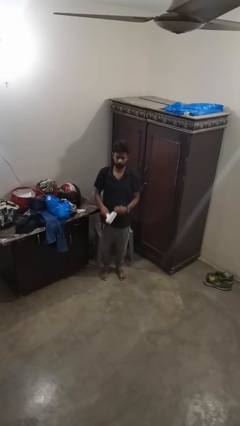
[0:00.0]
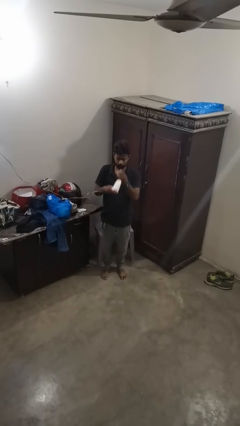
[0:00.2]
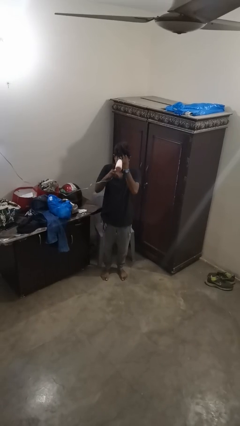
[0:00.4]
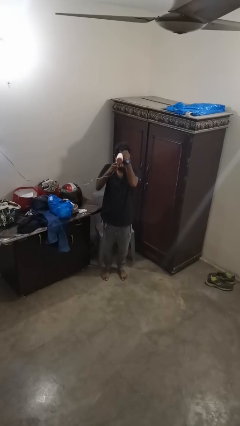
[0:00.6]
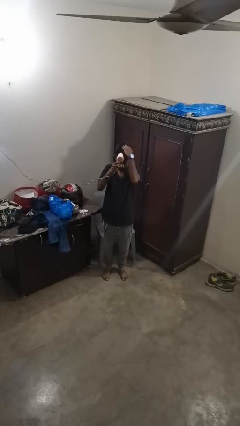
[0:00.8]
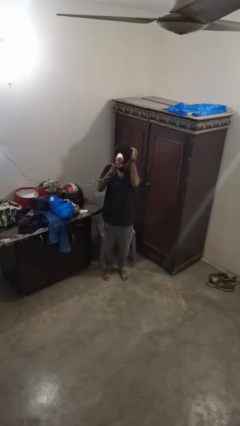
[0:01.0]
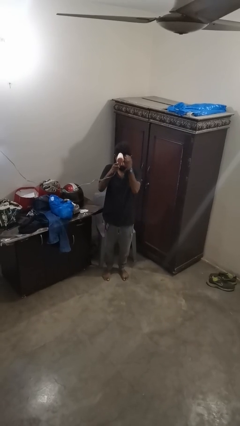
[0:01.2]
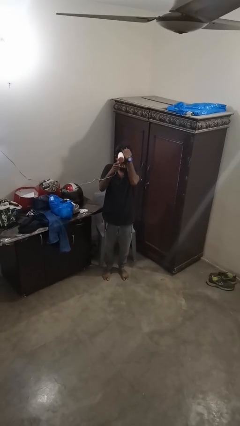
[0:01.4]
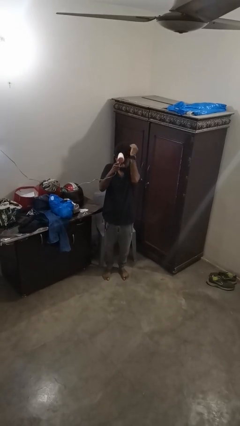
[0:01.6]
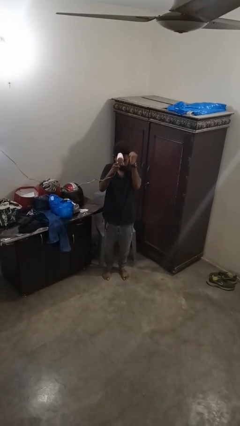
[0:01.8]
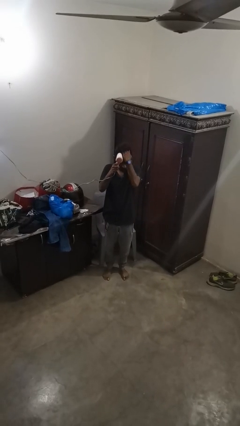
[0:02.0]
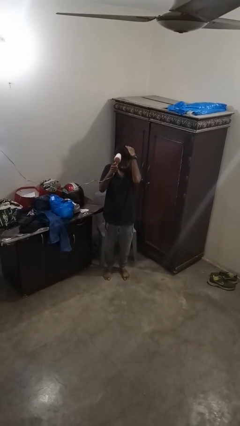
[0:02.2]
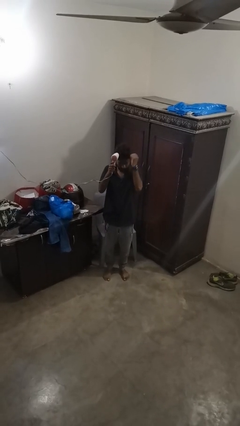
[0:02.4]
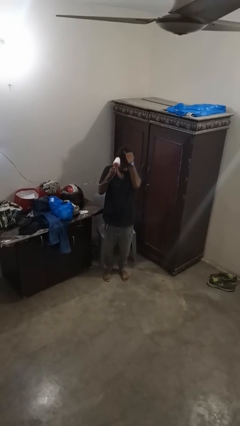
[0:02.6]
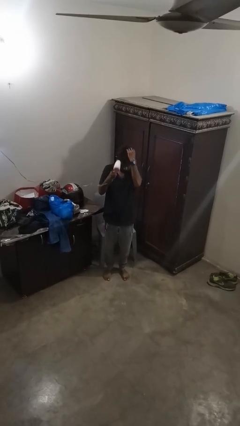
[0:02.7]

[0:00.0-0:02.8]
person dries hair with hairdryer

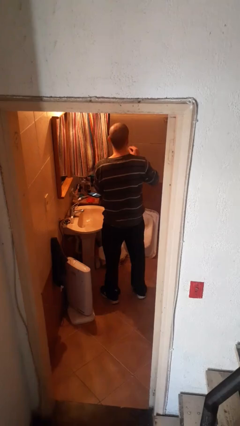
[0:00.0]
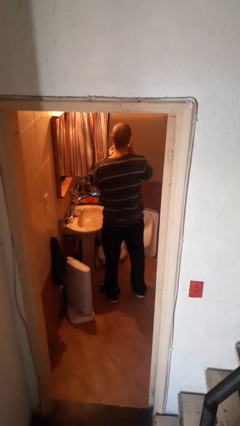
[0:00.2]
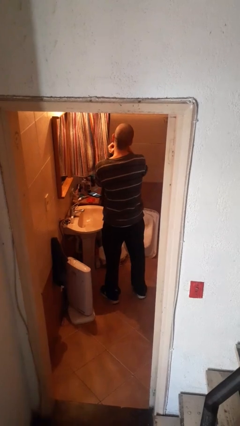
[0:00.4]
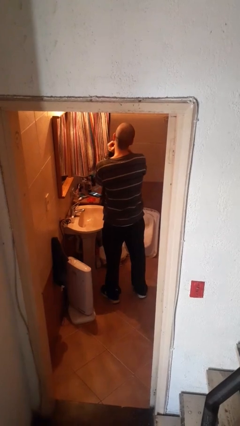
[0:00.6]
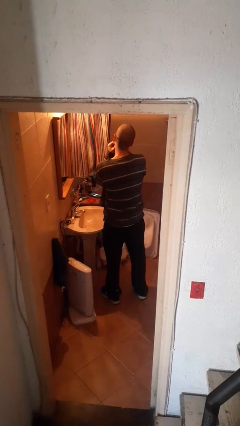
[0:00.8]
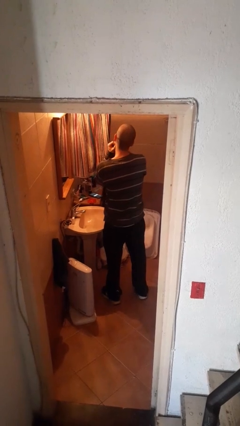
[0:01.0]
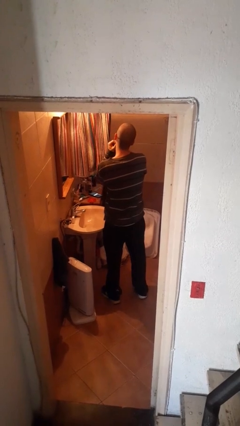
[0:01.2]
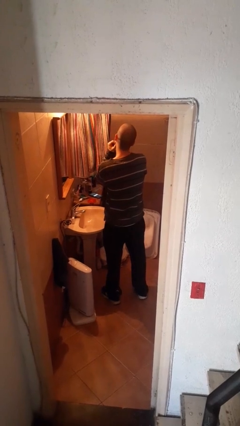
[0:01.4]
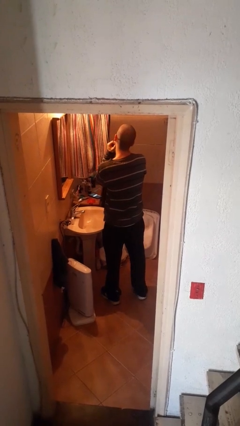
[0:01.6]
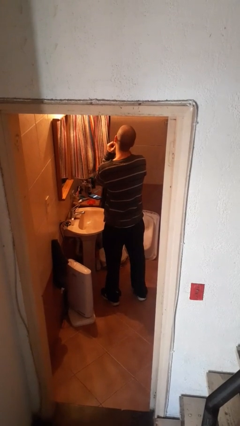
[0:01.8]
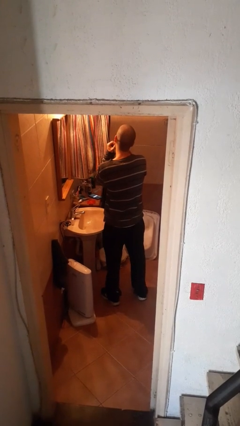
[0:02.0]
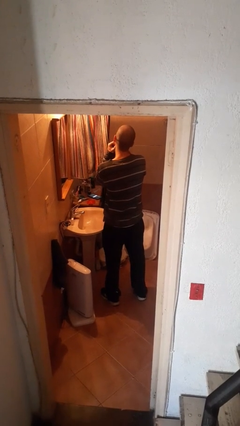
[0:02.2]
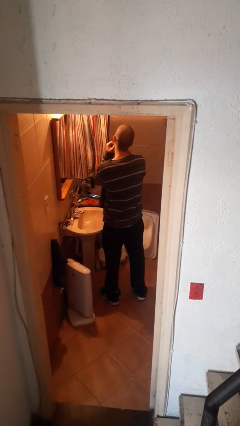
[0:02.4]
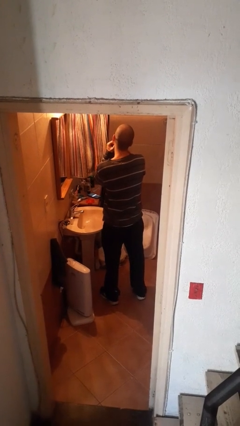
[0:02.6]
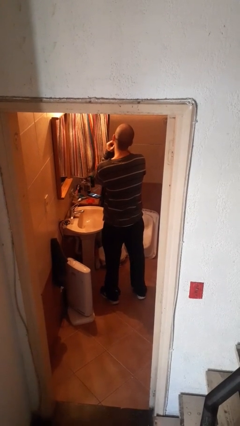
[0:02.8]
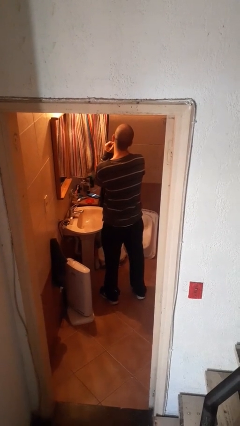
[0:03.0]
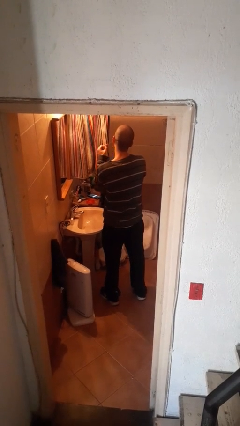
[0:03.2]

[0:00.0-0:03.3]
person flosses

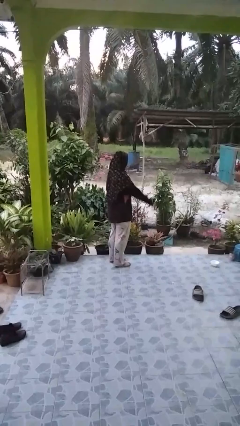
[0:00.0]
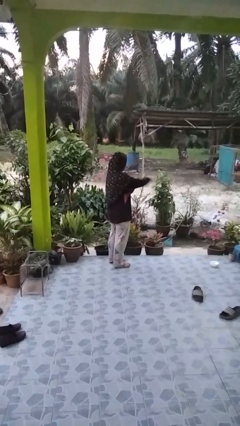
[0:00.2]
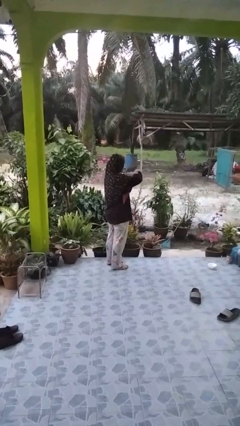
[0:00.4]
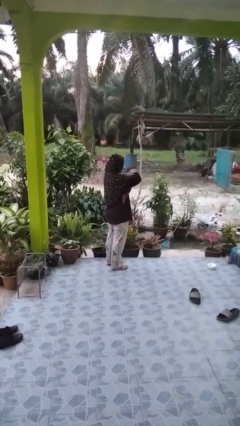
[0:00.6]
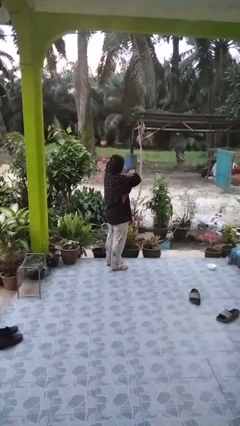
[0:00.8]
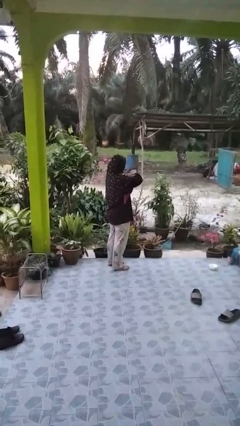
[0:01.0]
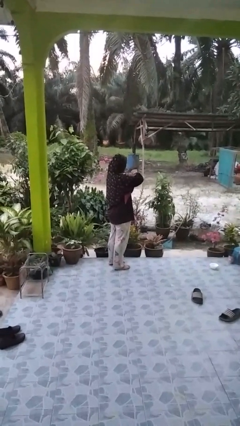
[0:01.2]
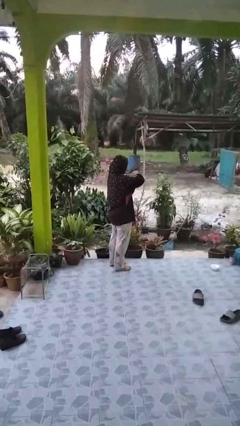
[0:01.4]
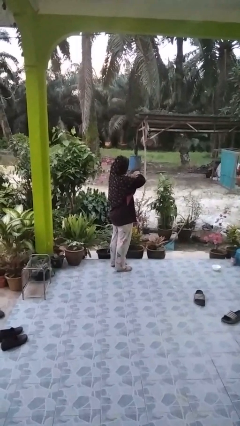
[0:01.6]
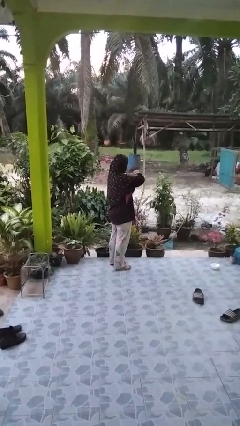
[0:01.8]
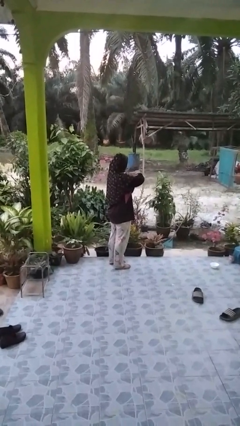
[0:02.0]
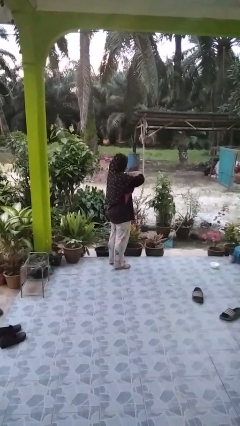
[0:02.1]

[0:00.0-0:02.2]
person looks at wristwatch

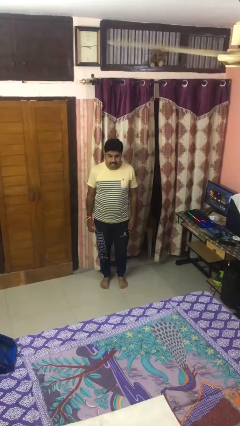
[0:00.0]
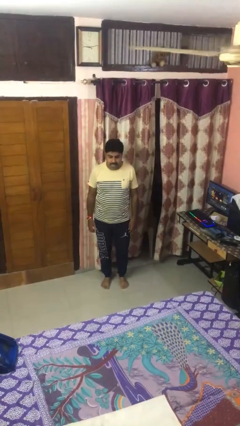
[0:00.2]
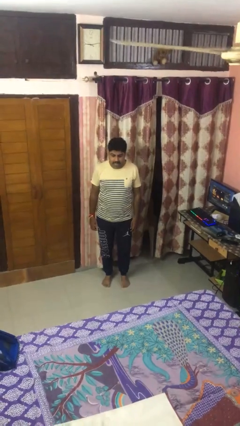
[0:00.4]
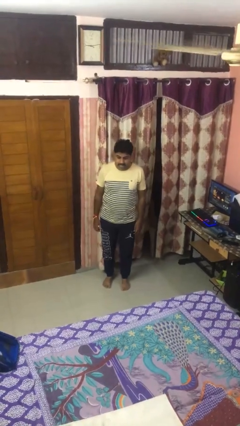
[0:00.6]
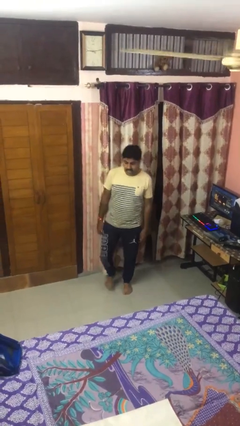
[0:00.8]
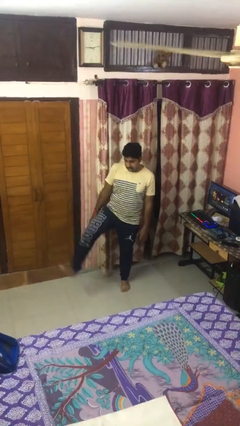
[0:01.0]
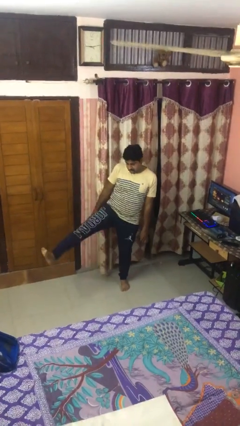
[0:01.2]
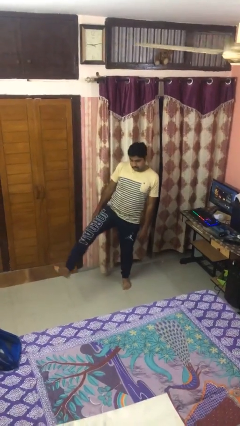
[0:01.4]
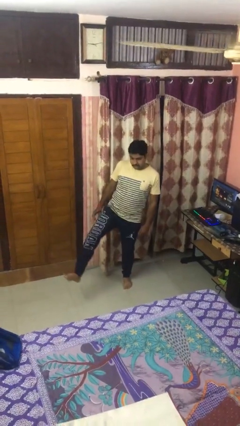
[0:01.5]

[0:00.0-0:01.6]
person karate kicks

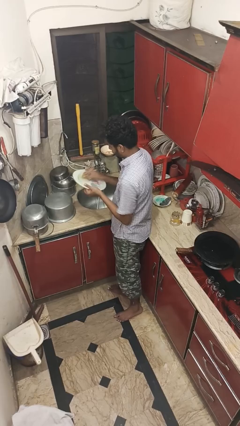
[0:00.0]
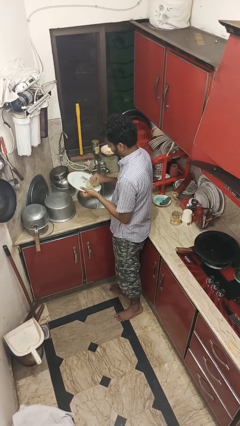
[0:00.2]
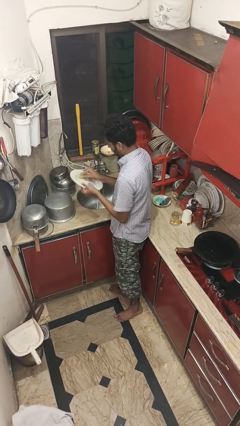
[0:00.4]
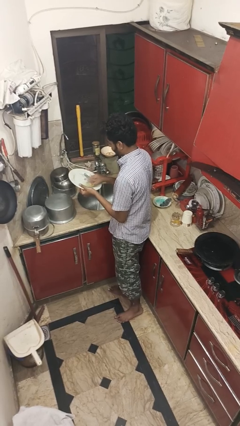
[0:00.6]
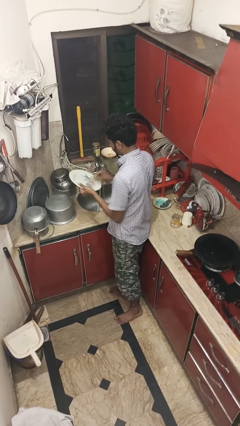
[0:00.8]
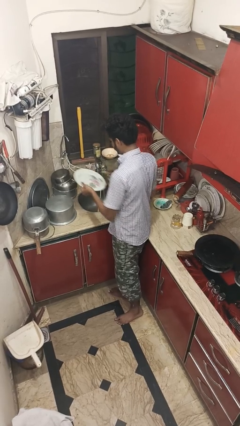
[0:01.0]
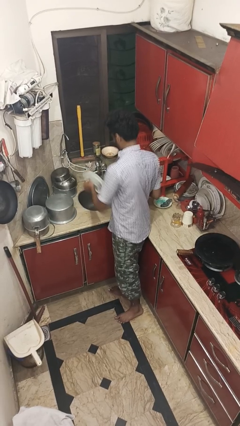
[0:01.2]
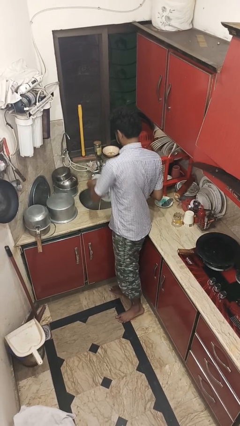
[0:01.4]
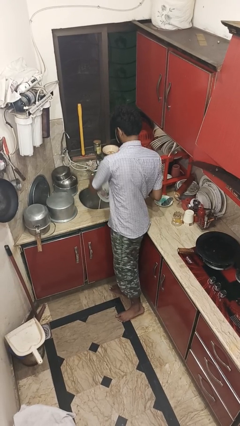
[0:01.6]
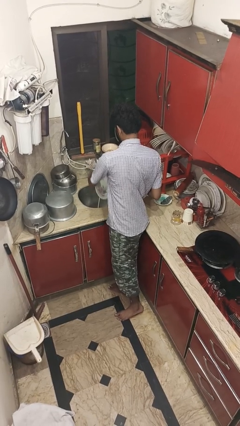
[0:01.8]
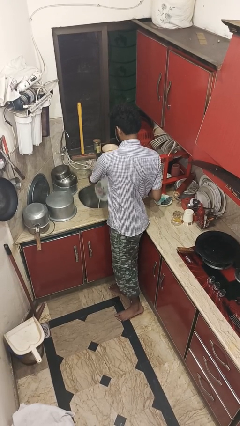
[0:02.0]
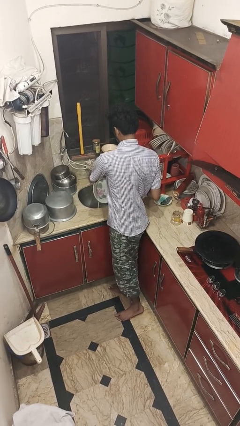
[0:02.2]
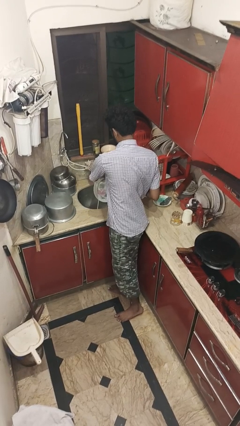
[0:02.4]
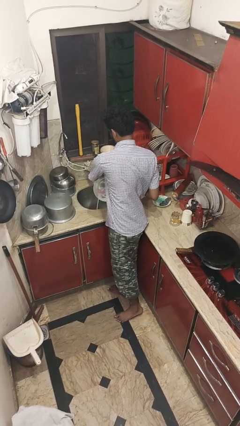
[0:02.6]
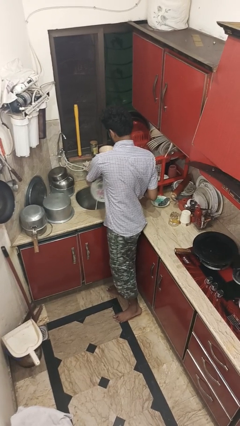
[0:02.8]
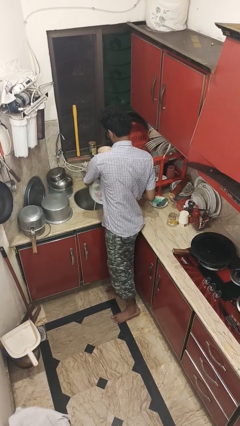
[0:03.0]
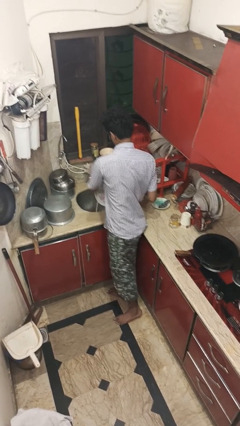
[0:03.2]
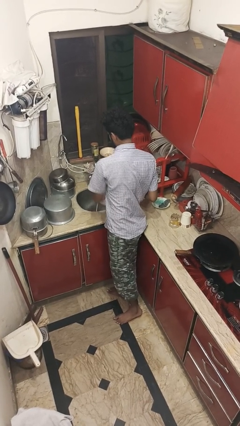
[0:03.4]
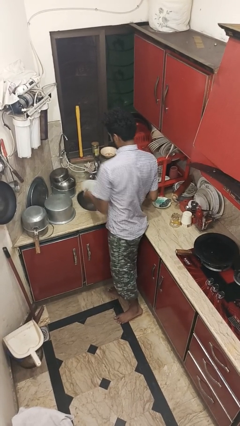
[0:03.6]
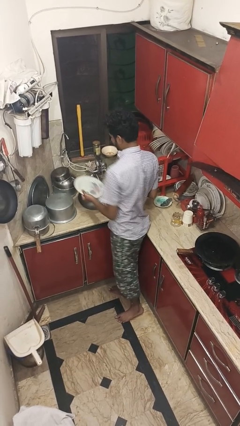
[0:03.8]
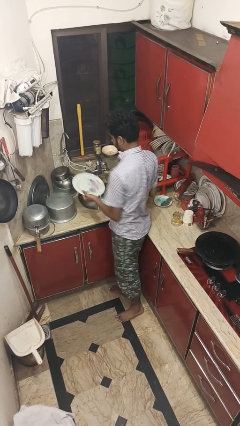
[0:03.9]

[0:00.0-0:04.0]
person washes dish

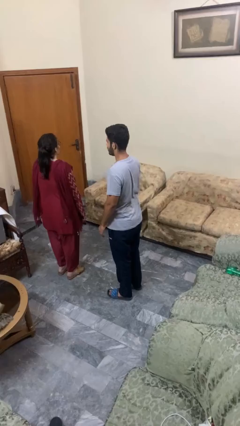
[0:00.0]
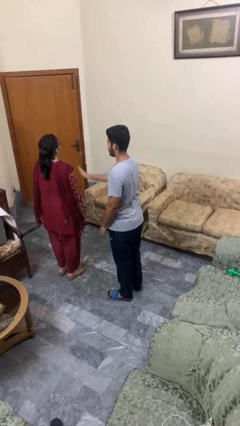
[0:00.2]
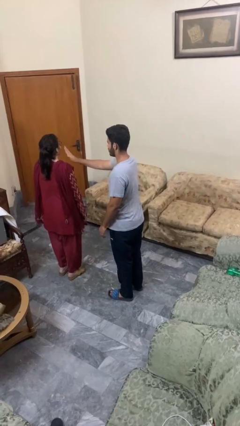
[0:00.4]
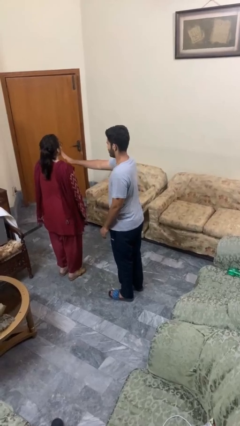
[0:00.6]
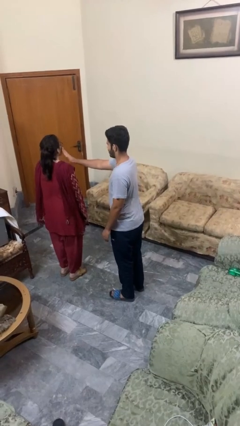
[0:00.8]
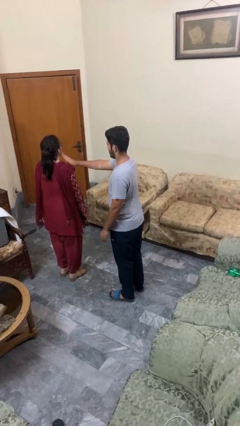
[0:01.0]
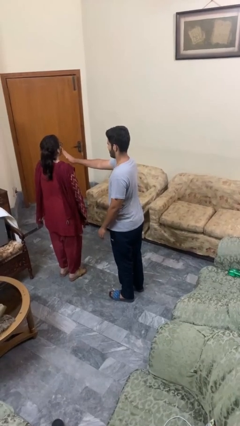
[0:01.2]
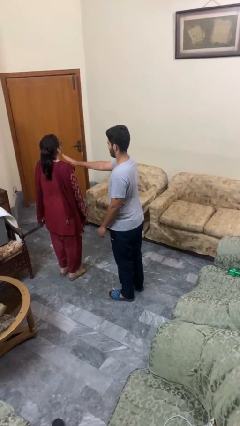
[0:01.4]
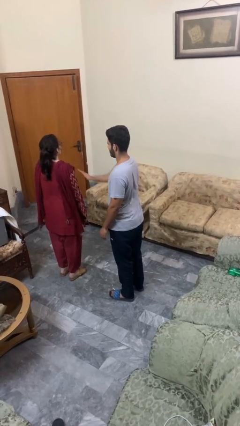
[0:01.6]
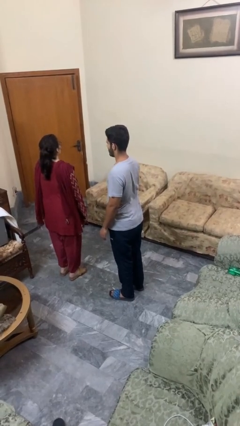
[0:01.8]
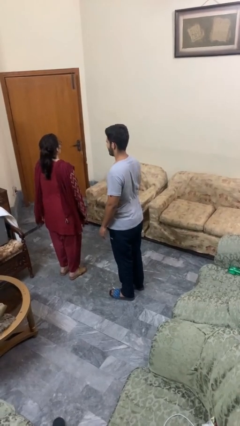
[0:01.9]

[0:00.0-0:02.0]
person touches face of person

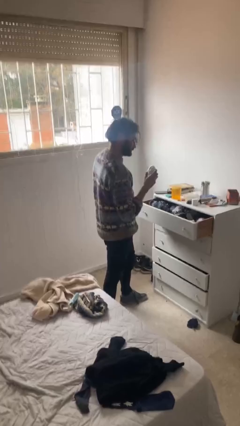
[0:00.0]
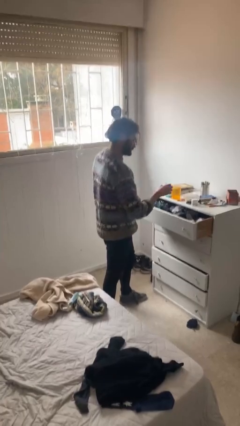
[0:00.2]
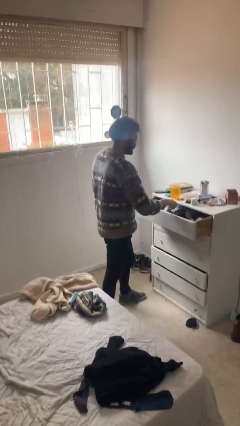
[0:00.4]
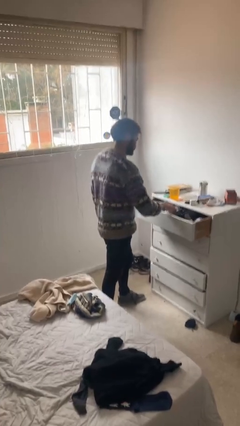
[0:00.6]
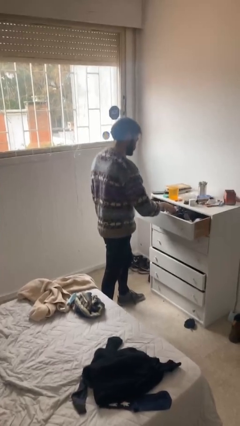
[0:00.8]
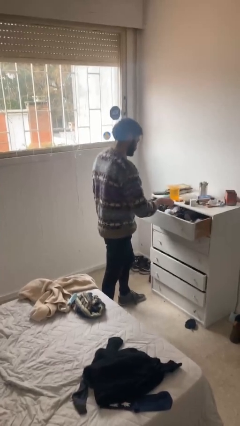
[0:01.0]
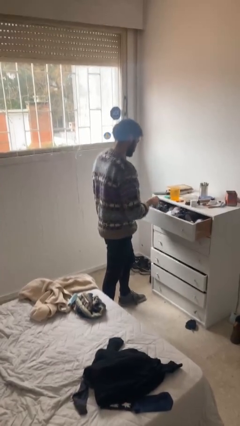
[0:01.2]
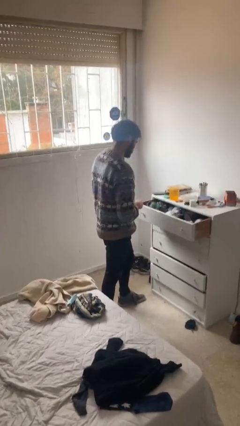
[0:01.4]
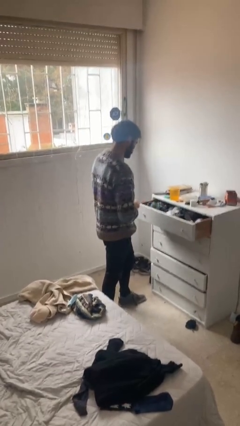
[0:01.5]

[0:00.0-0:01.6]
person puts clothes into dresser
